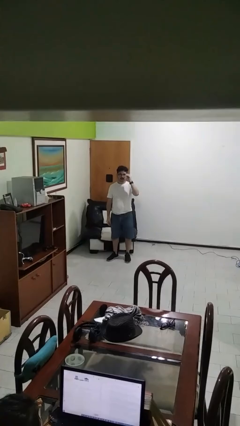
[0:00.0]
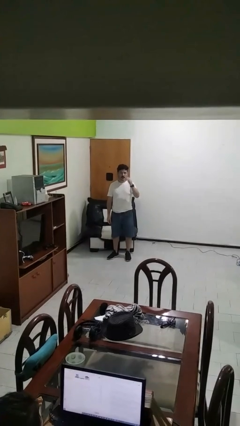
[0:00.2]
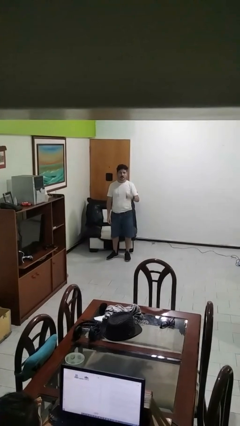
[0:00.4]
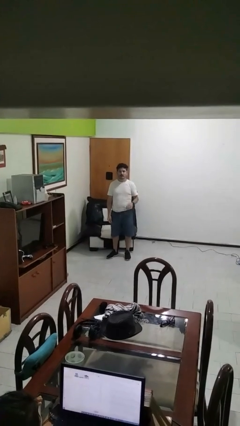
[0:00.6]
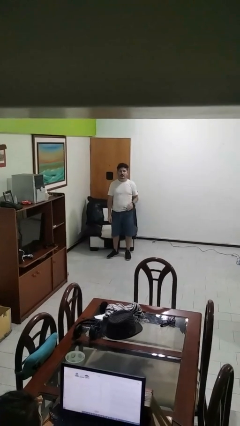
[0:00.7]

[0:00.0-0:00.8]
person takes off glasses

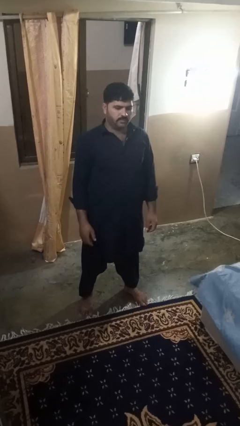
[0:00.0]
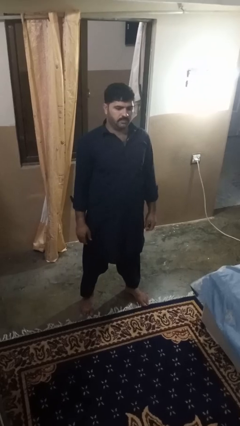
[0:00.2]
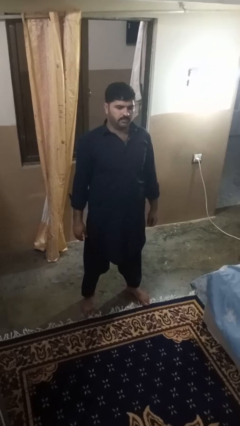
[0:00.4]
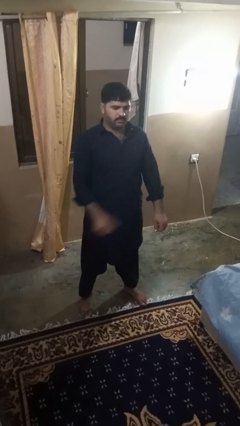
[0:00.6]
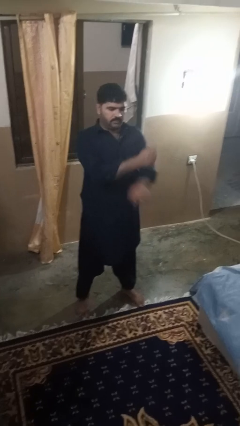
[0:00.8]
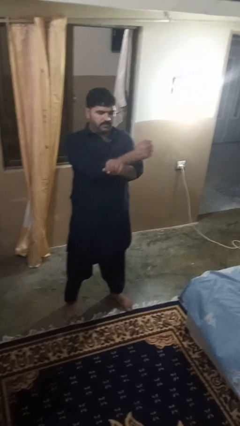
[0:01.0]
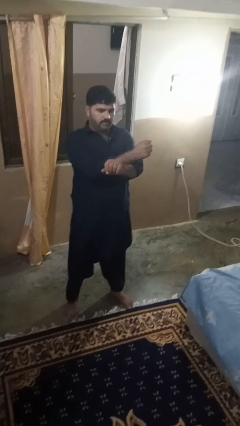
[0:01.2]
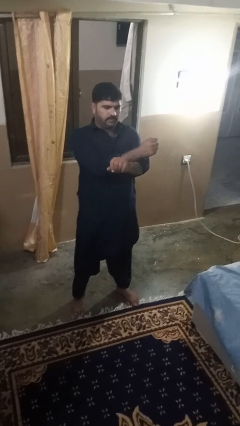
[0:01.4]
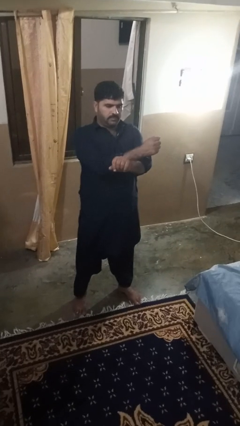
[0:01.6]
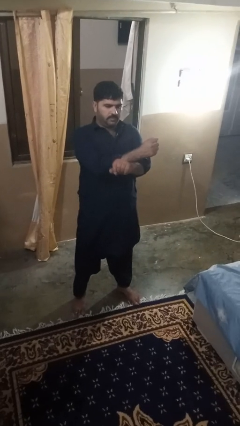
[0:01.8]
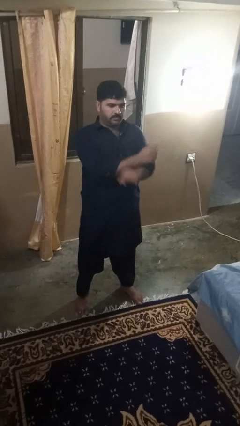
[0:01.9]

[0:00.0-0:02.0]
person crosses arms

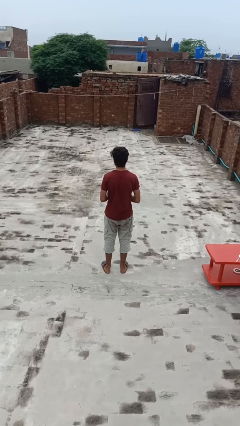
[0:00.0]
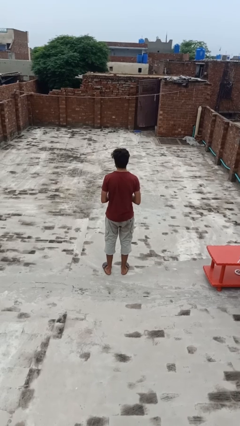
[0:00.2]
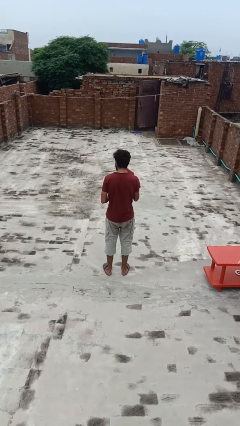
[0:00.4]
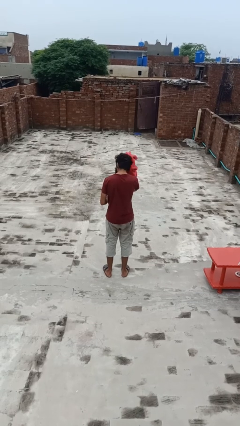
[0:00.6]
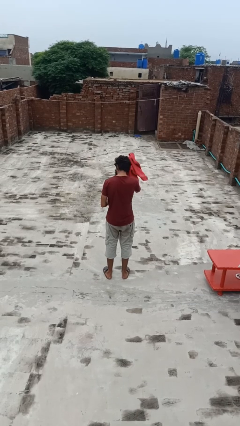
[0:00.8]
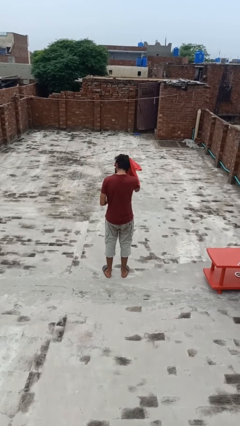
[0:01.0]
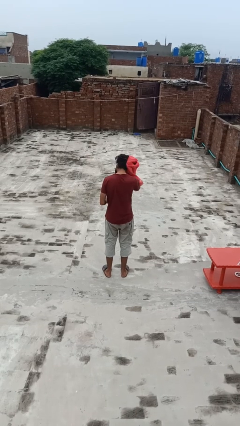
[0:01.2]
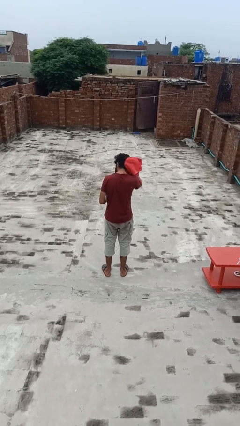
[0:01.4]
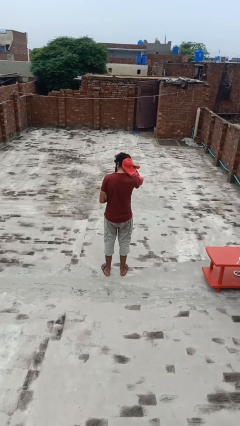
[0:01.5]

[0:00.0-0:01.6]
person dries hair with towel

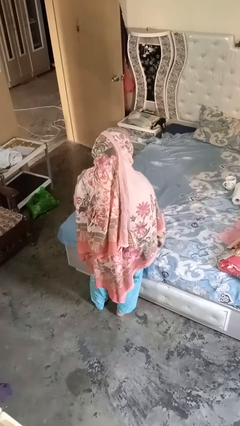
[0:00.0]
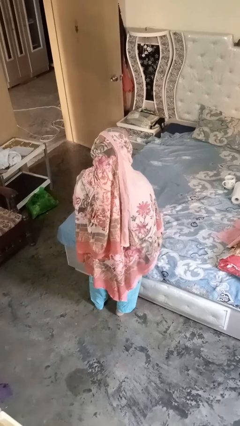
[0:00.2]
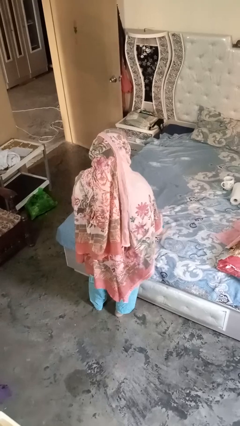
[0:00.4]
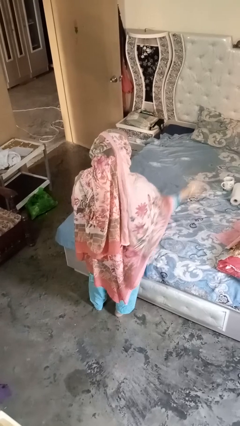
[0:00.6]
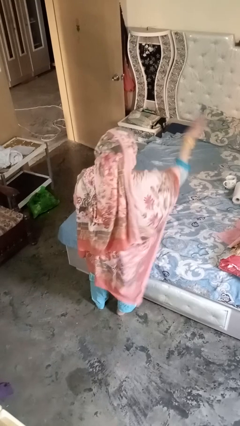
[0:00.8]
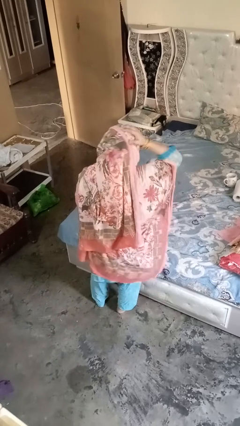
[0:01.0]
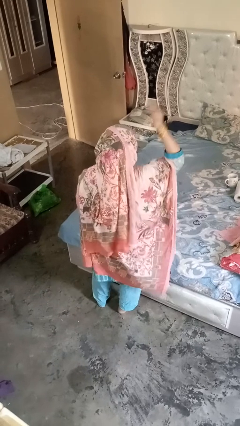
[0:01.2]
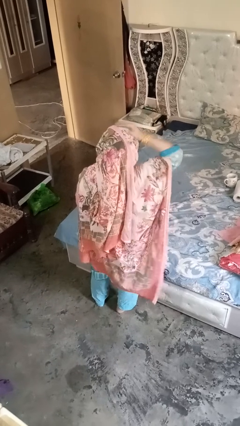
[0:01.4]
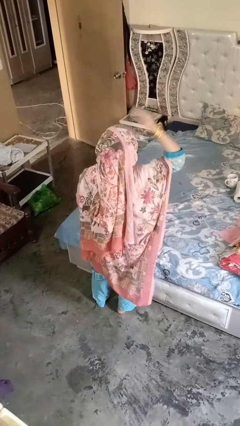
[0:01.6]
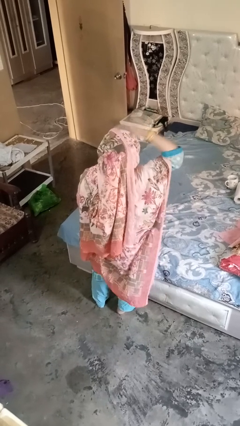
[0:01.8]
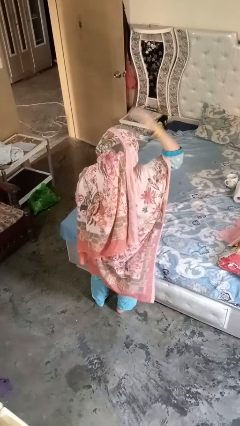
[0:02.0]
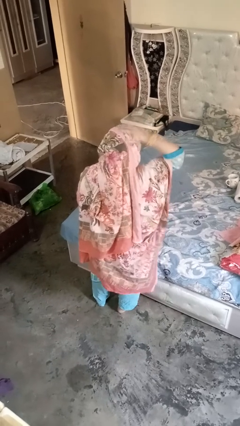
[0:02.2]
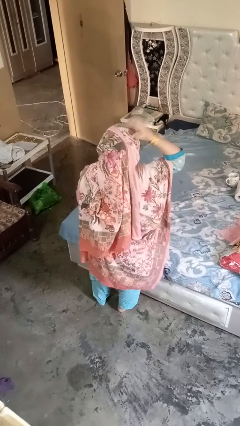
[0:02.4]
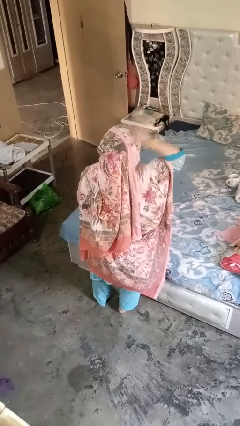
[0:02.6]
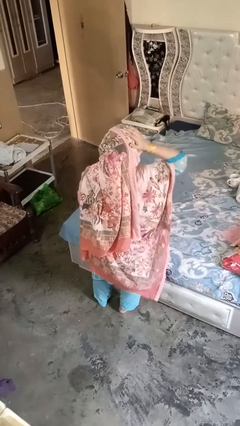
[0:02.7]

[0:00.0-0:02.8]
person pats head

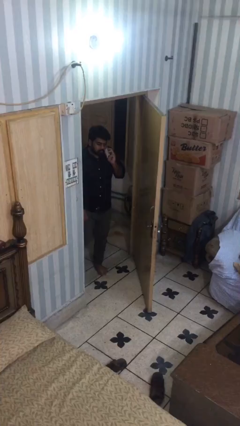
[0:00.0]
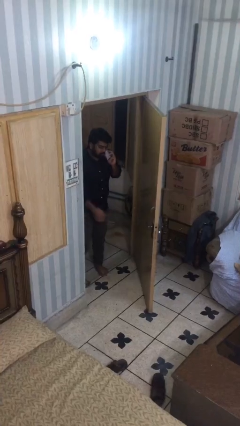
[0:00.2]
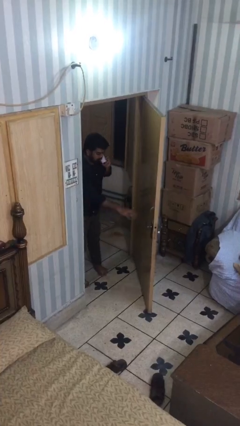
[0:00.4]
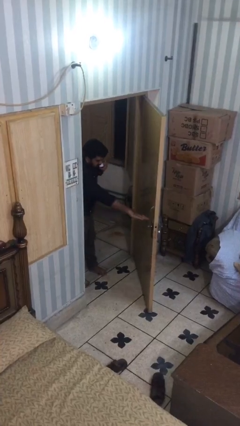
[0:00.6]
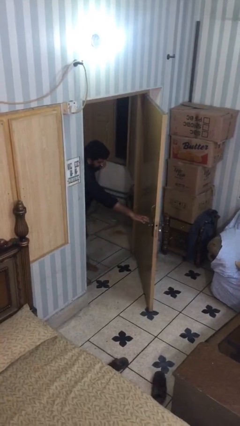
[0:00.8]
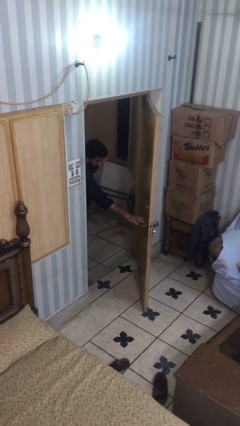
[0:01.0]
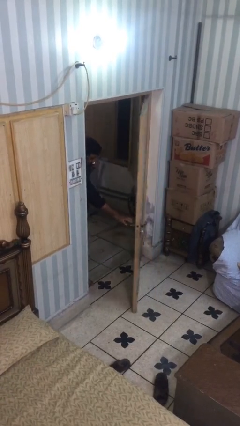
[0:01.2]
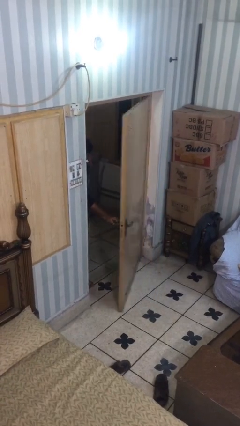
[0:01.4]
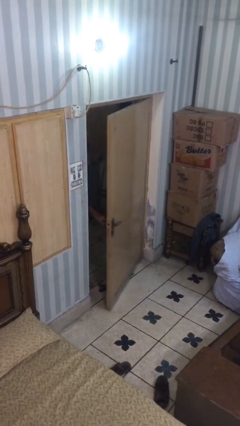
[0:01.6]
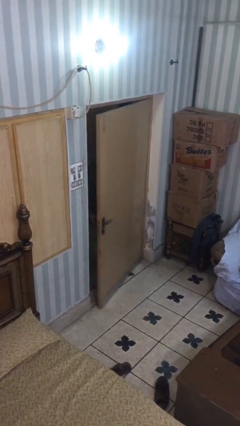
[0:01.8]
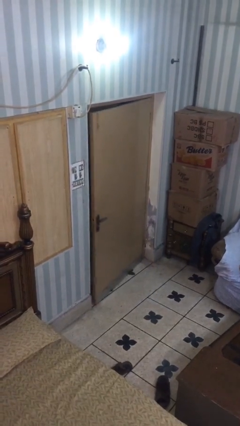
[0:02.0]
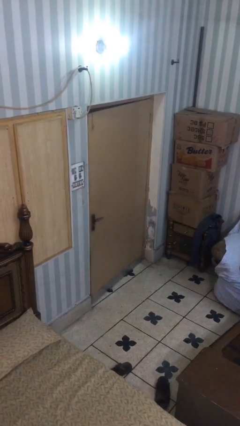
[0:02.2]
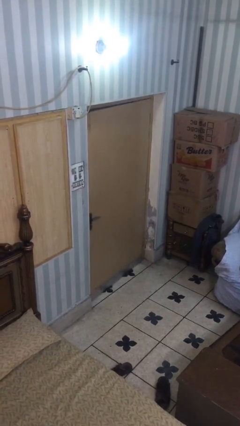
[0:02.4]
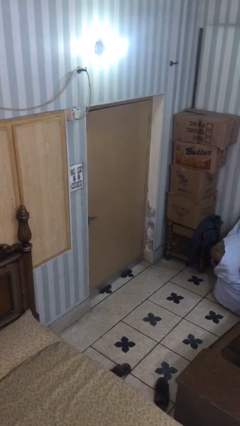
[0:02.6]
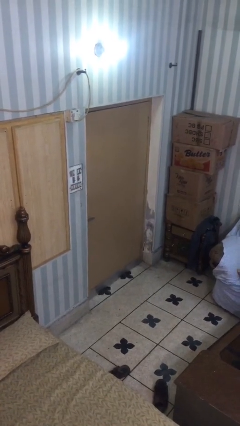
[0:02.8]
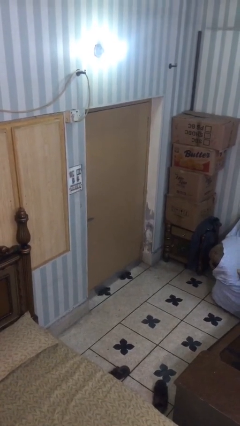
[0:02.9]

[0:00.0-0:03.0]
person closes facility door

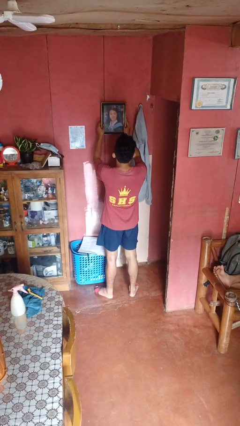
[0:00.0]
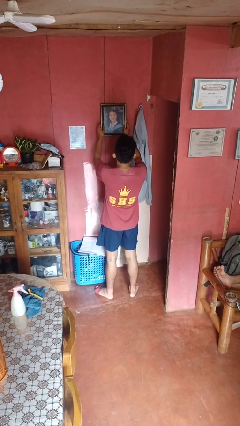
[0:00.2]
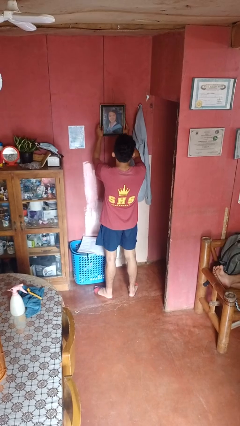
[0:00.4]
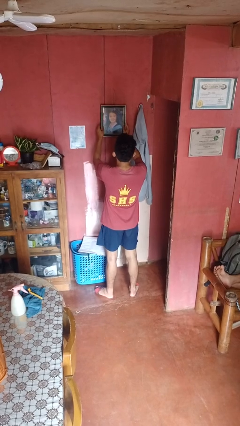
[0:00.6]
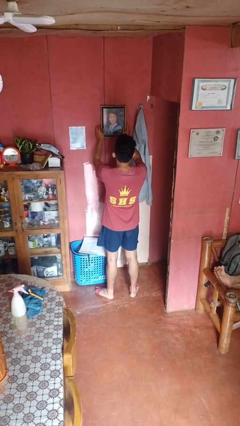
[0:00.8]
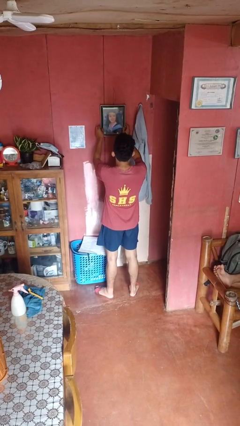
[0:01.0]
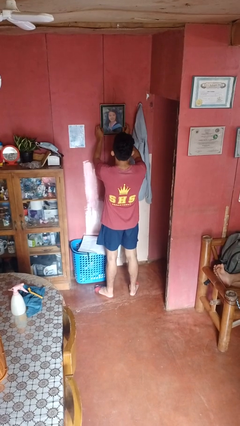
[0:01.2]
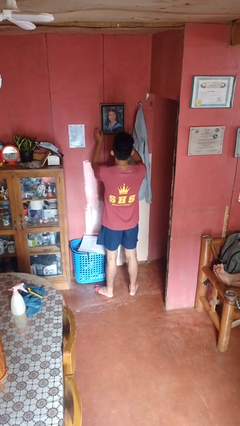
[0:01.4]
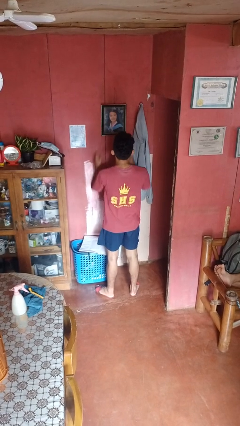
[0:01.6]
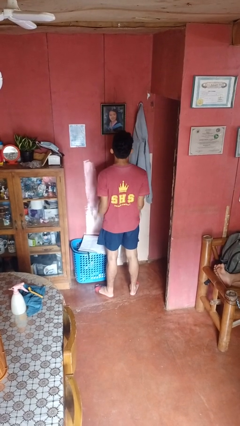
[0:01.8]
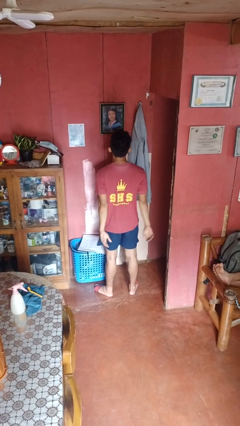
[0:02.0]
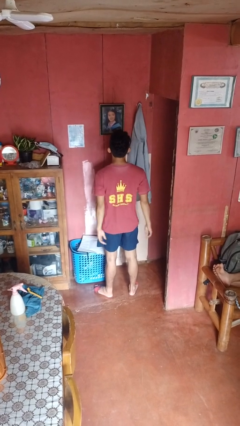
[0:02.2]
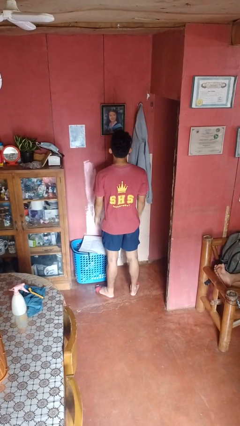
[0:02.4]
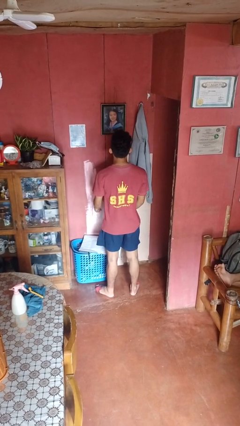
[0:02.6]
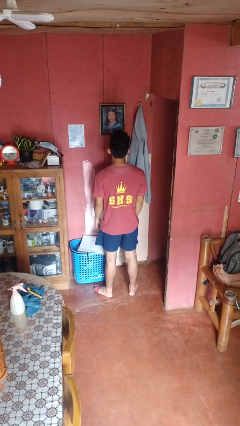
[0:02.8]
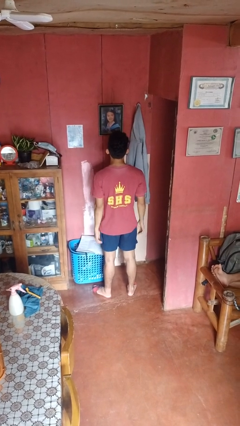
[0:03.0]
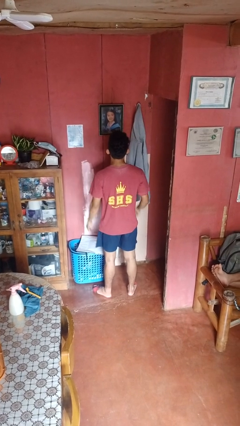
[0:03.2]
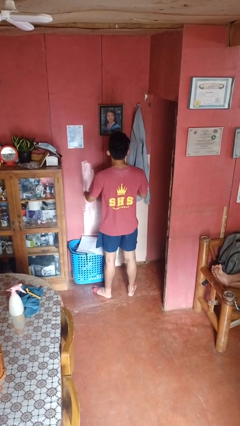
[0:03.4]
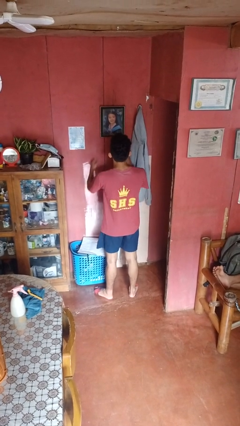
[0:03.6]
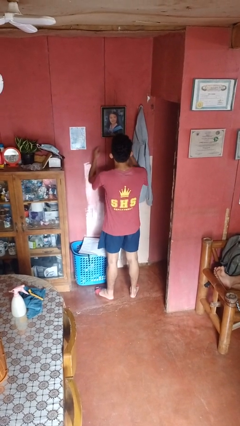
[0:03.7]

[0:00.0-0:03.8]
person puts up picture frame

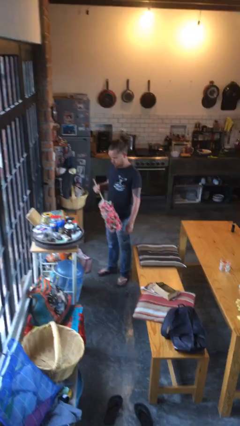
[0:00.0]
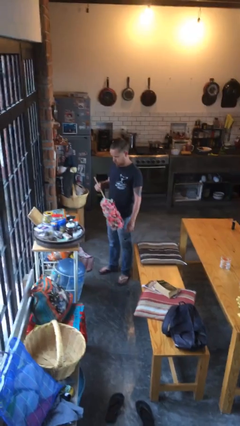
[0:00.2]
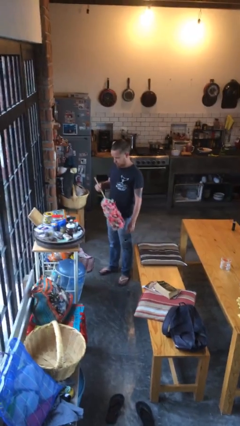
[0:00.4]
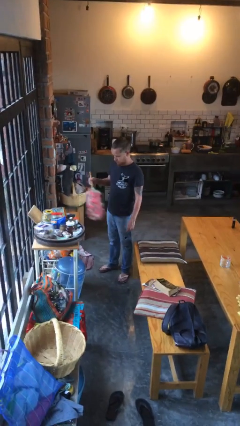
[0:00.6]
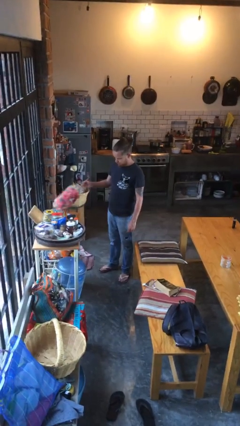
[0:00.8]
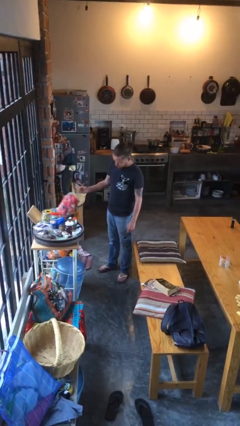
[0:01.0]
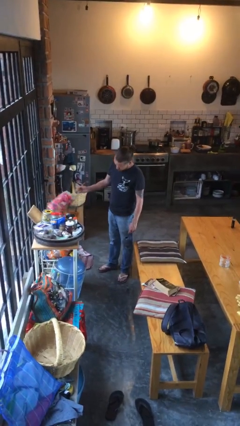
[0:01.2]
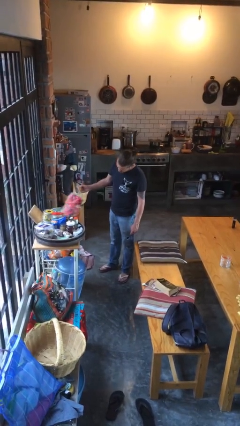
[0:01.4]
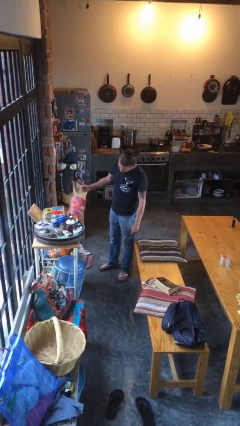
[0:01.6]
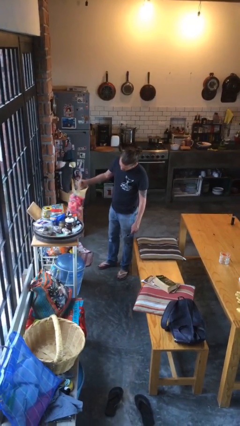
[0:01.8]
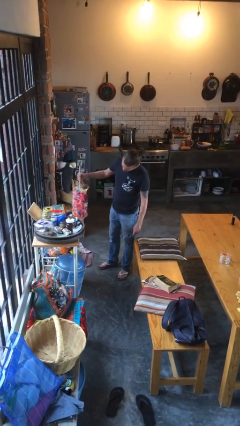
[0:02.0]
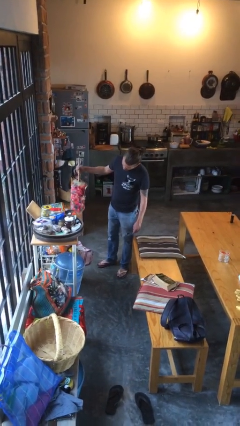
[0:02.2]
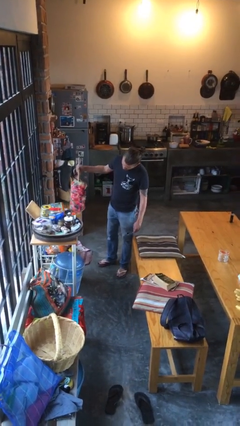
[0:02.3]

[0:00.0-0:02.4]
person dusts furniture

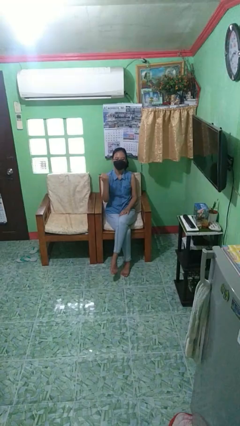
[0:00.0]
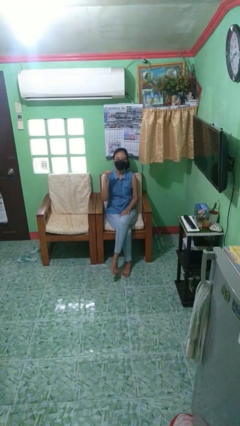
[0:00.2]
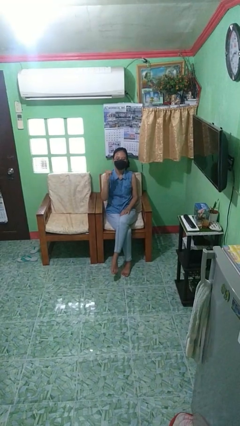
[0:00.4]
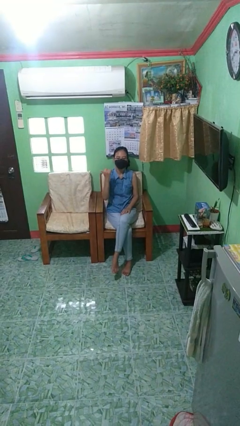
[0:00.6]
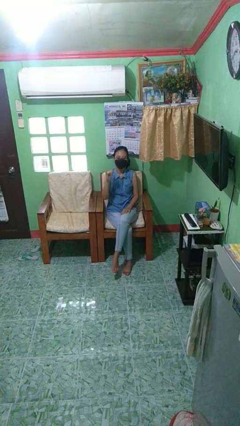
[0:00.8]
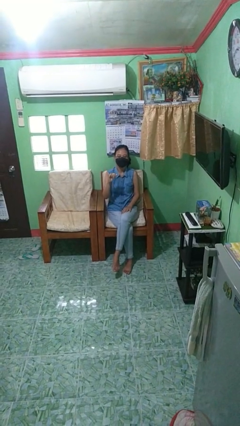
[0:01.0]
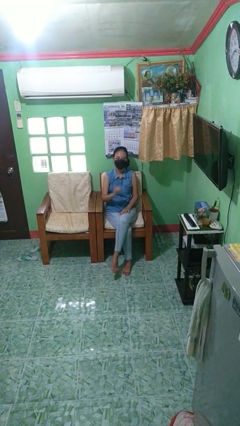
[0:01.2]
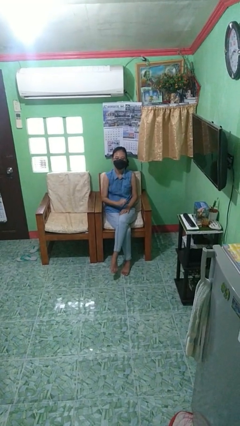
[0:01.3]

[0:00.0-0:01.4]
person gestures hang loose
